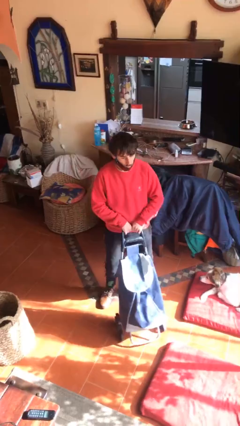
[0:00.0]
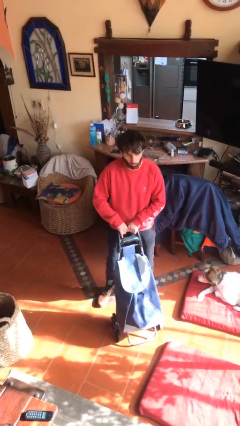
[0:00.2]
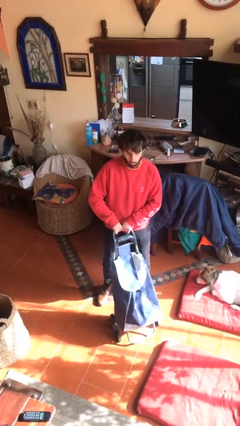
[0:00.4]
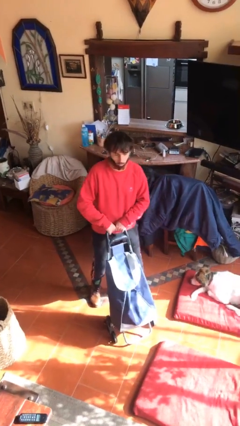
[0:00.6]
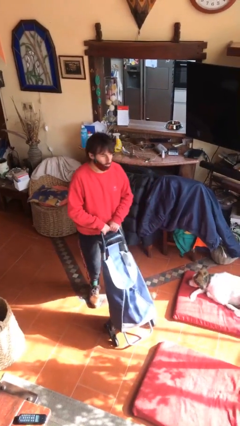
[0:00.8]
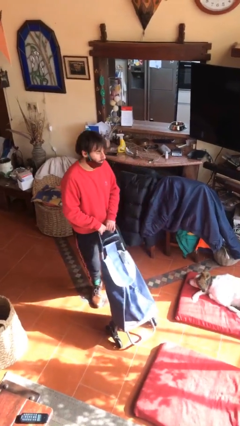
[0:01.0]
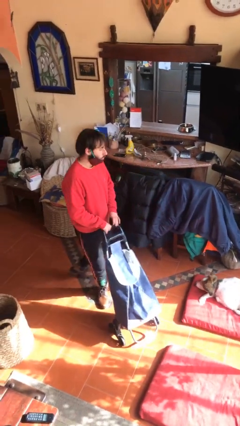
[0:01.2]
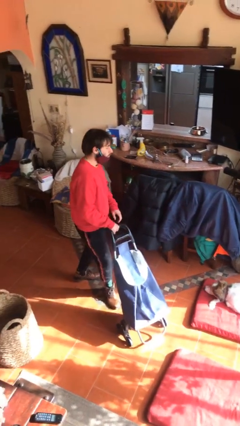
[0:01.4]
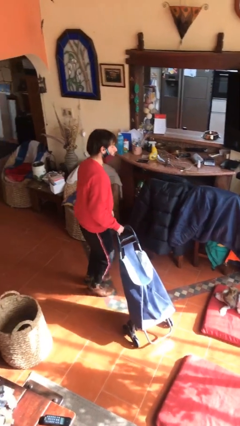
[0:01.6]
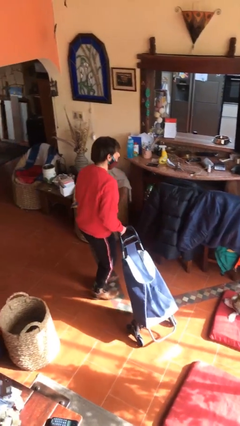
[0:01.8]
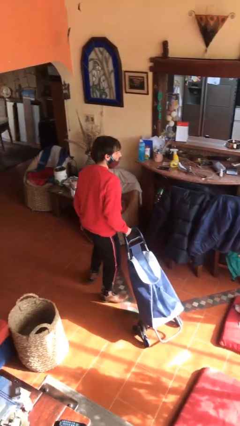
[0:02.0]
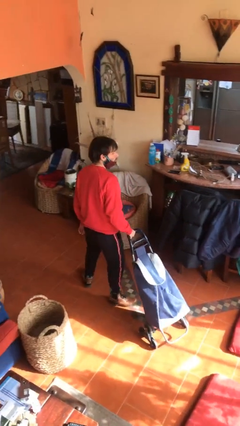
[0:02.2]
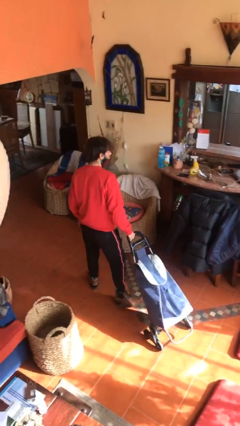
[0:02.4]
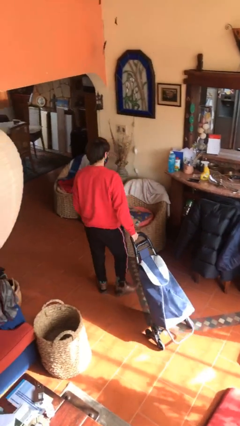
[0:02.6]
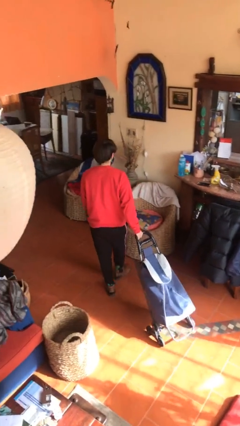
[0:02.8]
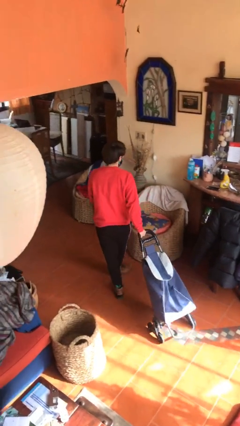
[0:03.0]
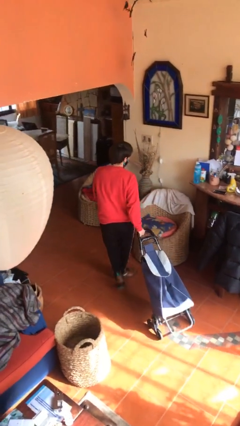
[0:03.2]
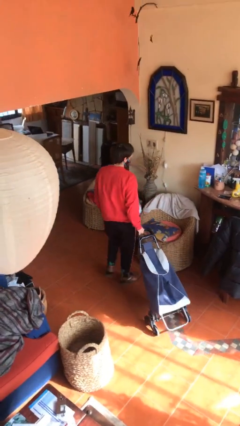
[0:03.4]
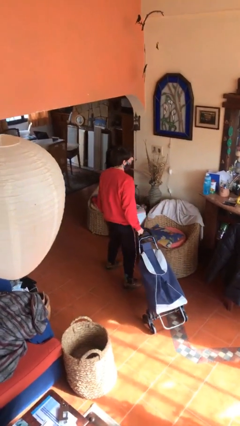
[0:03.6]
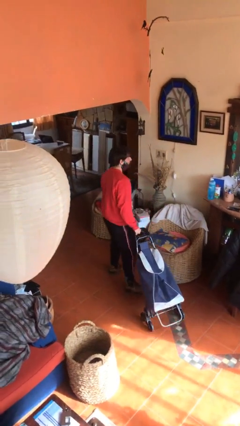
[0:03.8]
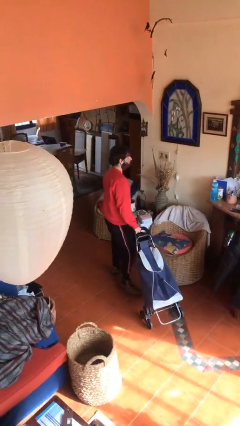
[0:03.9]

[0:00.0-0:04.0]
person pulls wheeled cart

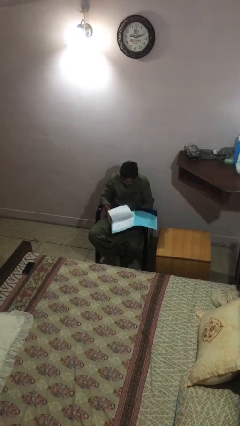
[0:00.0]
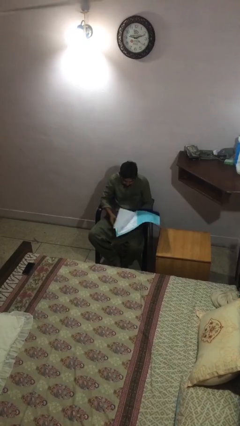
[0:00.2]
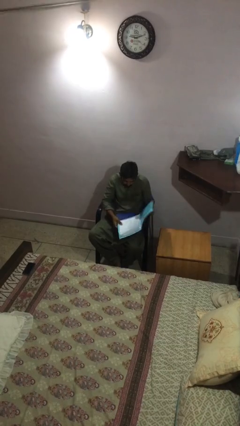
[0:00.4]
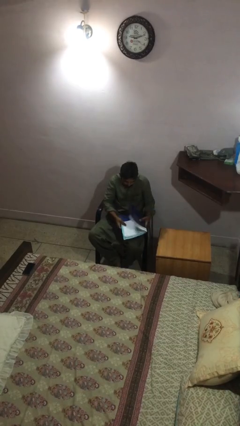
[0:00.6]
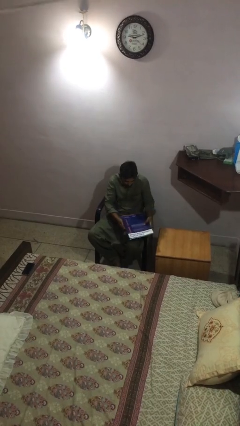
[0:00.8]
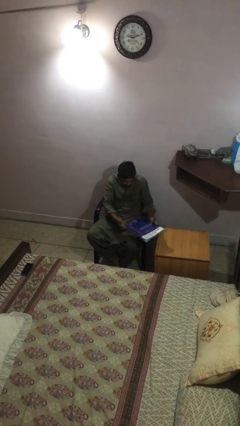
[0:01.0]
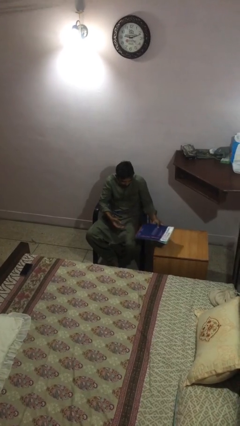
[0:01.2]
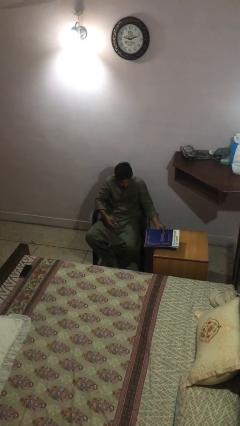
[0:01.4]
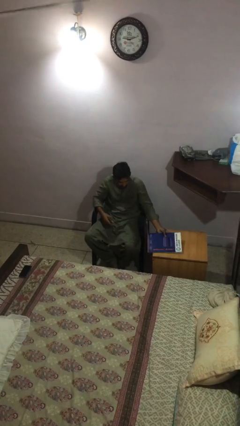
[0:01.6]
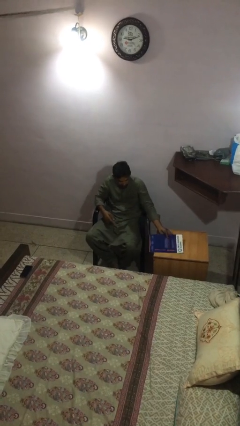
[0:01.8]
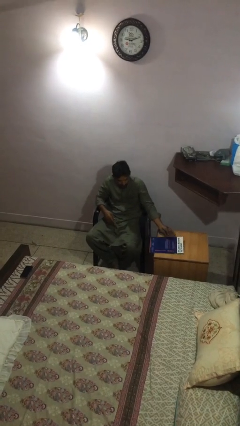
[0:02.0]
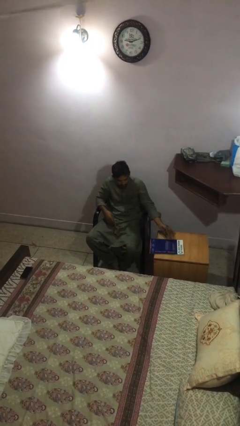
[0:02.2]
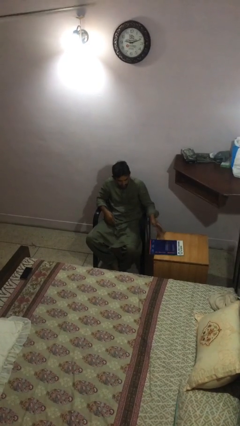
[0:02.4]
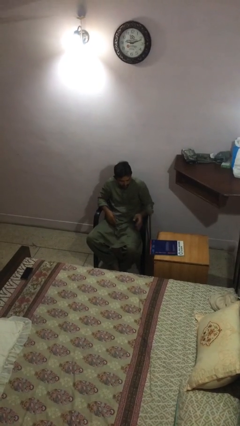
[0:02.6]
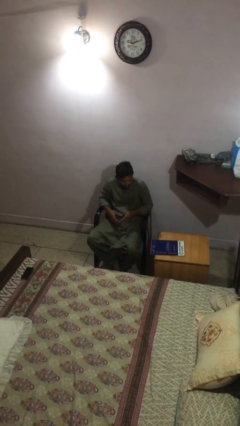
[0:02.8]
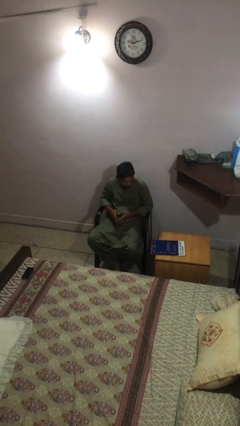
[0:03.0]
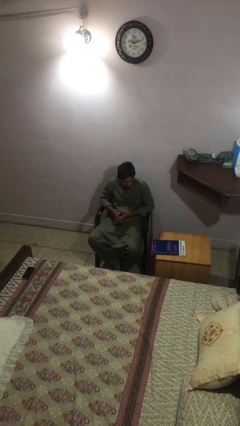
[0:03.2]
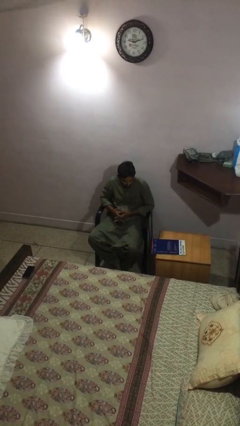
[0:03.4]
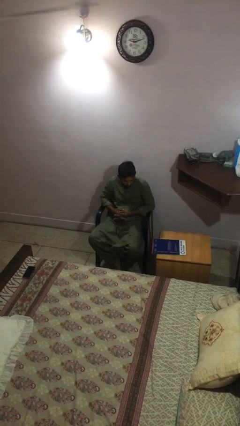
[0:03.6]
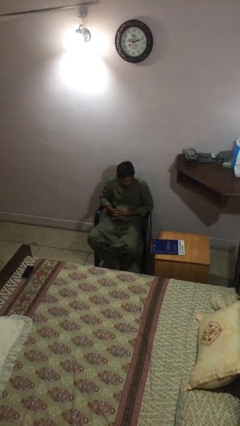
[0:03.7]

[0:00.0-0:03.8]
person puts down object on table

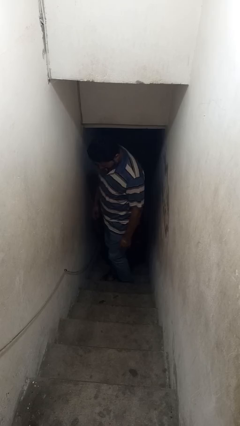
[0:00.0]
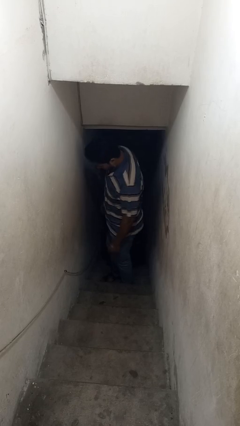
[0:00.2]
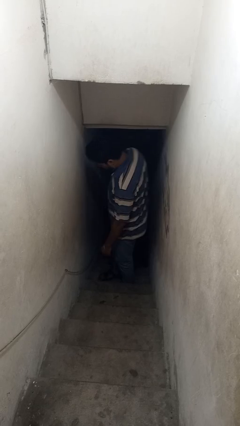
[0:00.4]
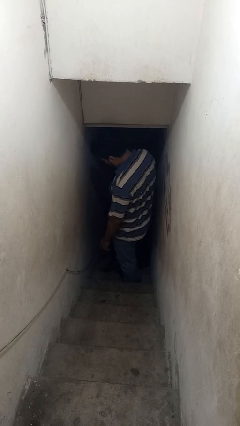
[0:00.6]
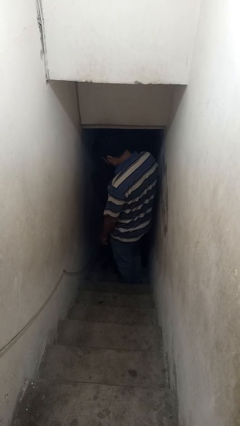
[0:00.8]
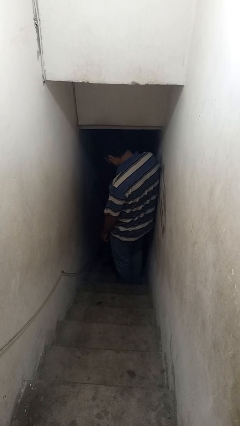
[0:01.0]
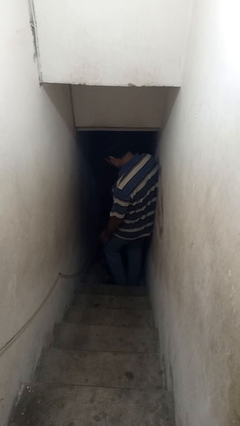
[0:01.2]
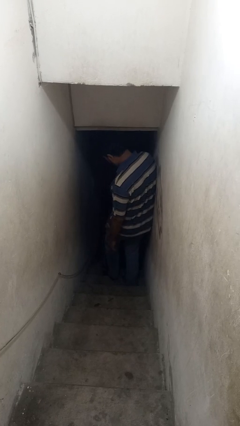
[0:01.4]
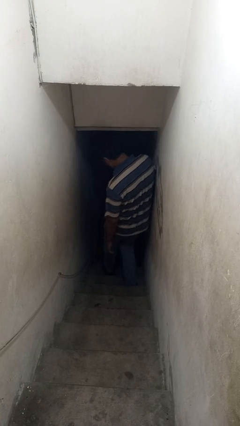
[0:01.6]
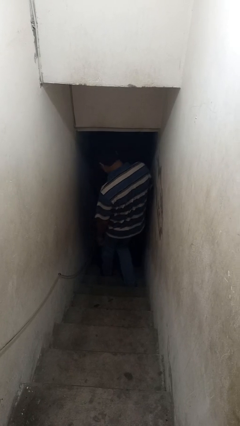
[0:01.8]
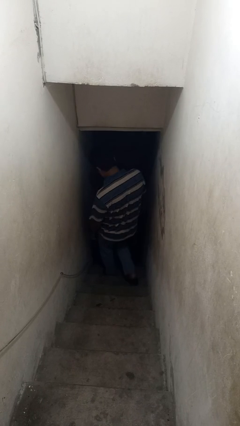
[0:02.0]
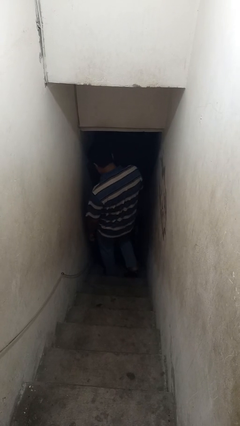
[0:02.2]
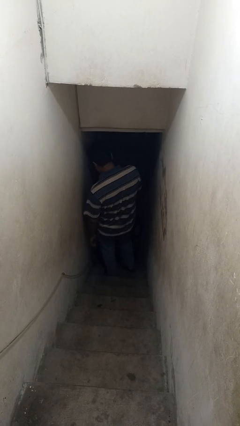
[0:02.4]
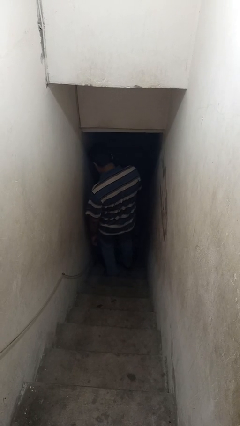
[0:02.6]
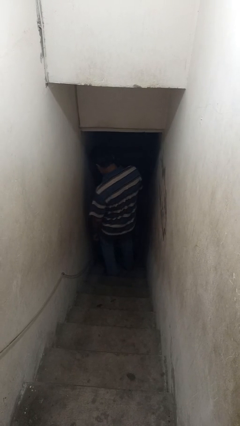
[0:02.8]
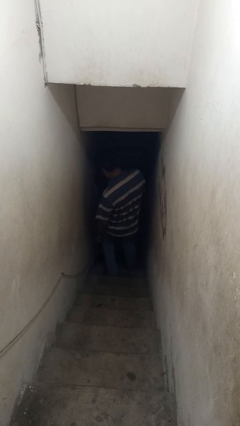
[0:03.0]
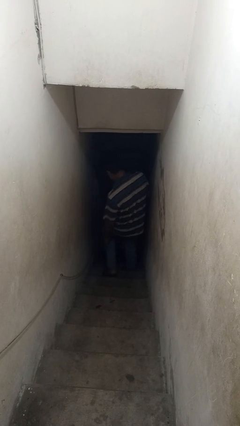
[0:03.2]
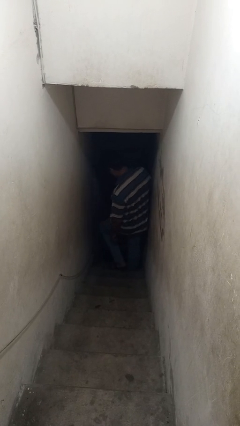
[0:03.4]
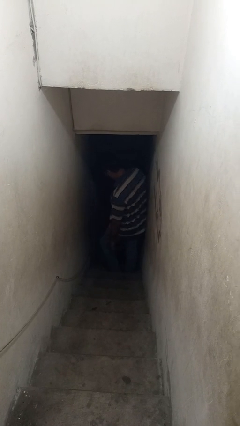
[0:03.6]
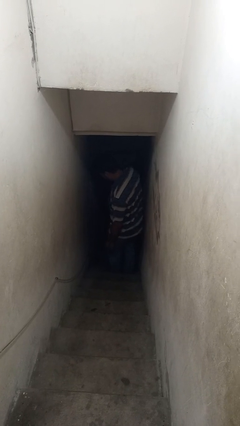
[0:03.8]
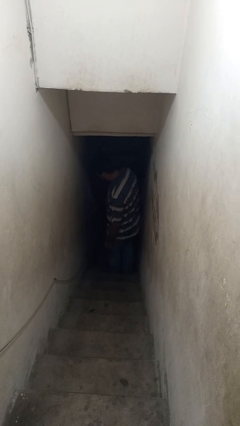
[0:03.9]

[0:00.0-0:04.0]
person climbs down stairs

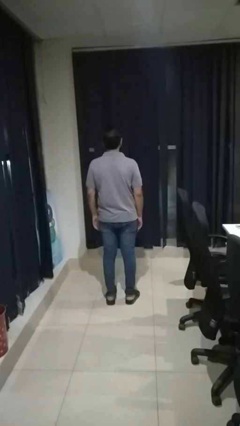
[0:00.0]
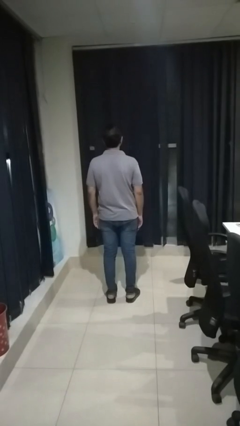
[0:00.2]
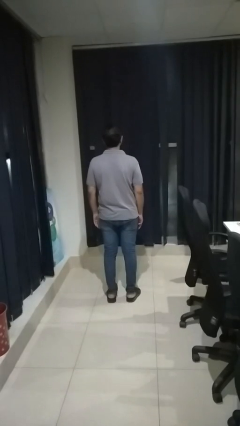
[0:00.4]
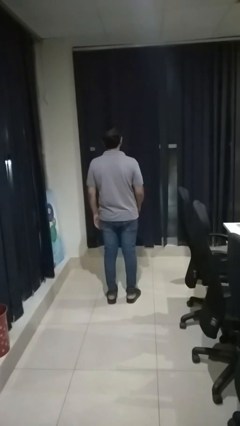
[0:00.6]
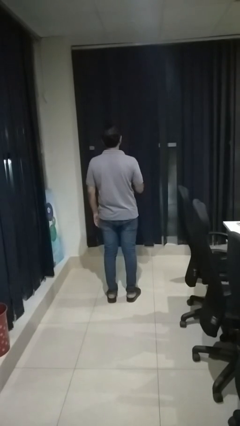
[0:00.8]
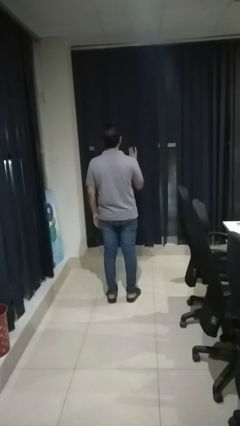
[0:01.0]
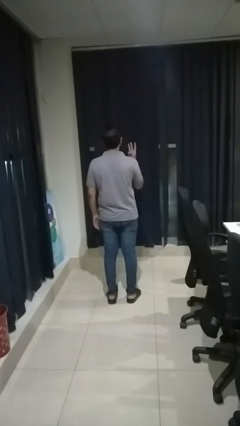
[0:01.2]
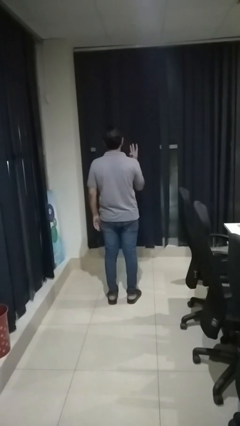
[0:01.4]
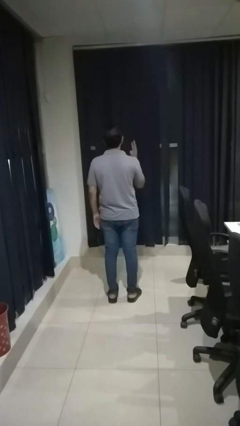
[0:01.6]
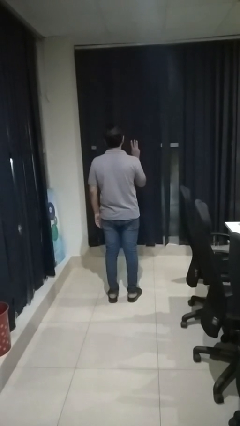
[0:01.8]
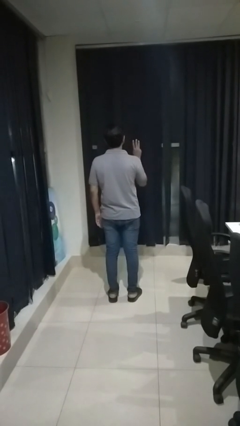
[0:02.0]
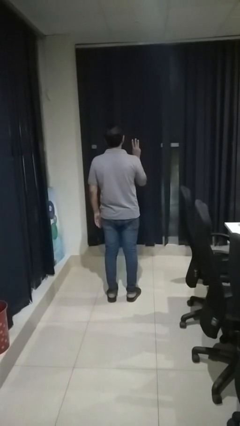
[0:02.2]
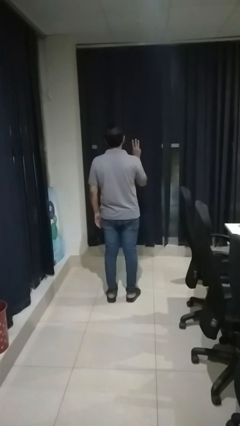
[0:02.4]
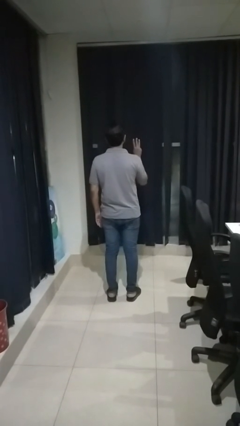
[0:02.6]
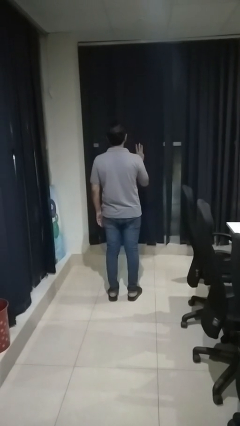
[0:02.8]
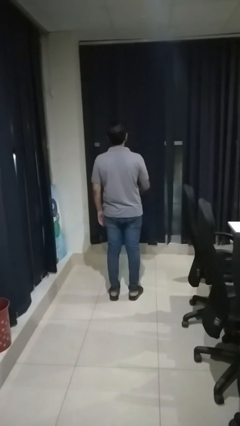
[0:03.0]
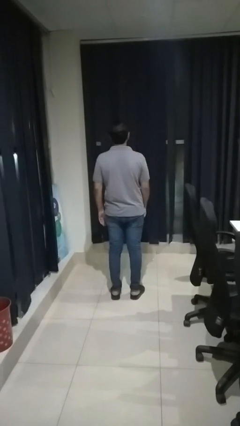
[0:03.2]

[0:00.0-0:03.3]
person gestures number three

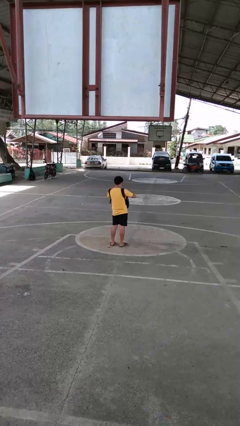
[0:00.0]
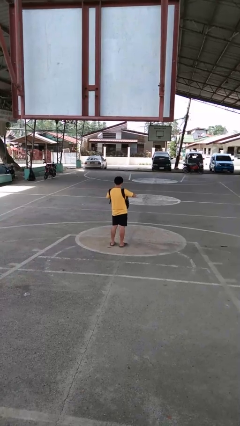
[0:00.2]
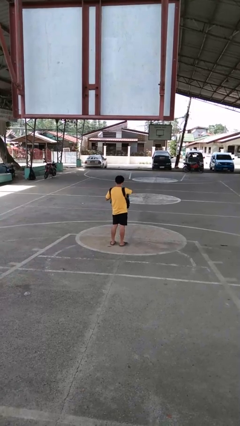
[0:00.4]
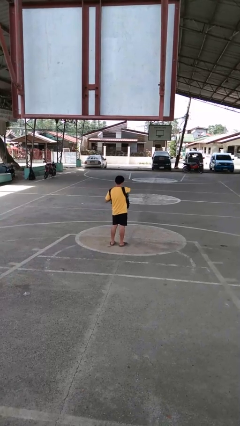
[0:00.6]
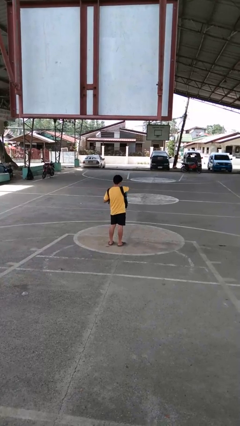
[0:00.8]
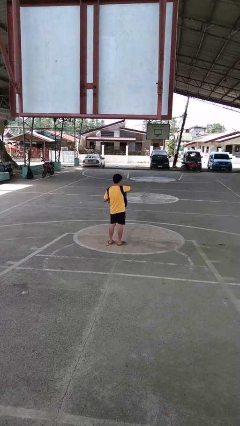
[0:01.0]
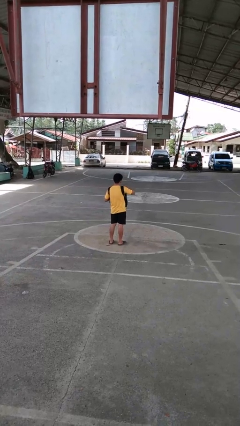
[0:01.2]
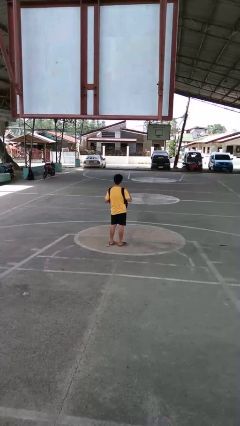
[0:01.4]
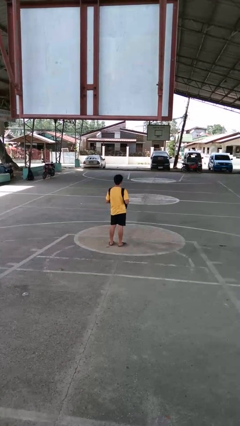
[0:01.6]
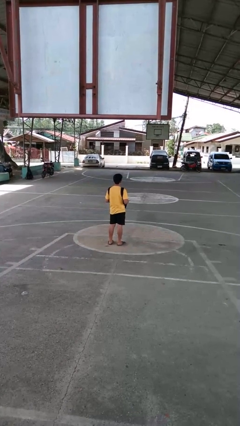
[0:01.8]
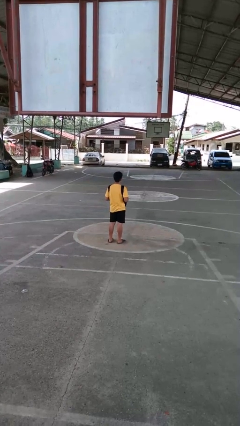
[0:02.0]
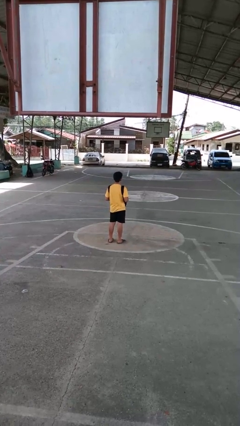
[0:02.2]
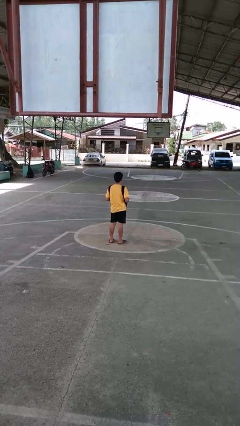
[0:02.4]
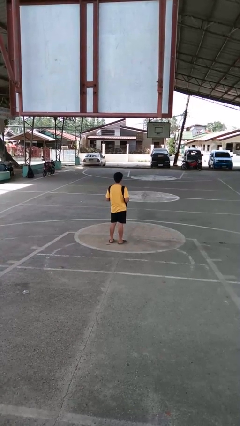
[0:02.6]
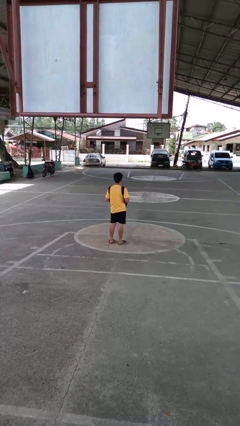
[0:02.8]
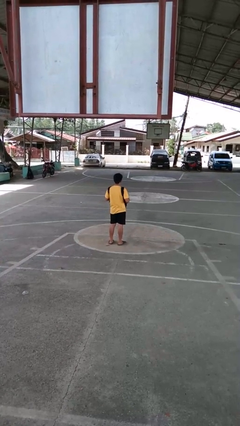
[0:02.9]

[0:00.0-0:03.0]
person puts object into purse
